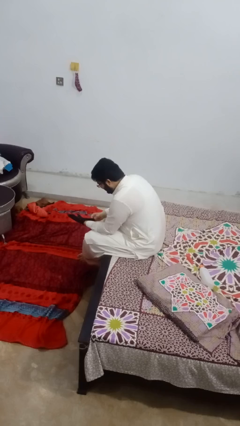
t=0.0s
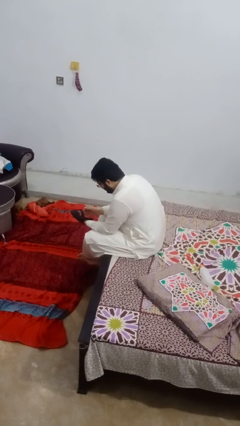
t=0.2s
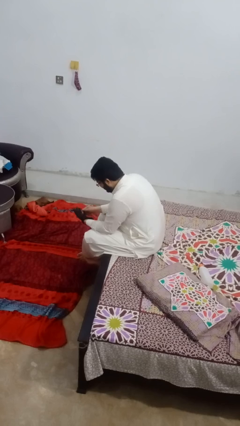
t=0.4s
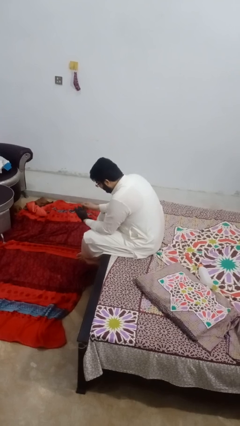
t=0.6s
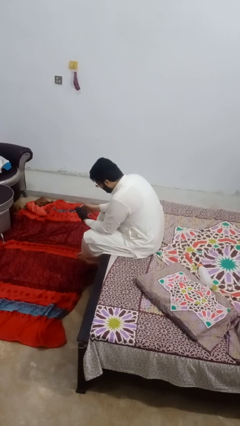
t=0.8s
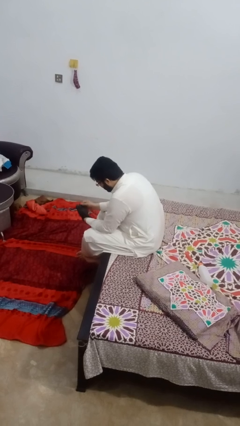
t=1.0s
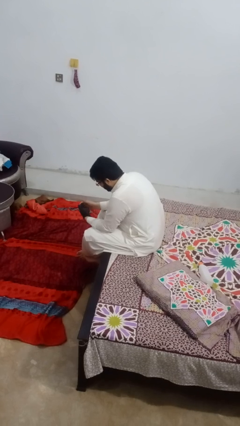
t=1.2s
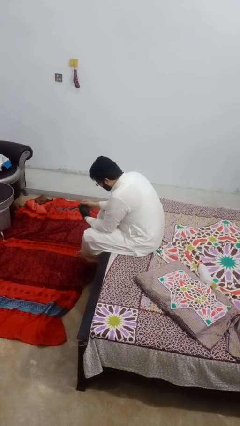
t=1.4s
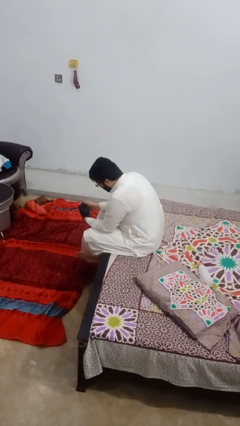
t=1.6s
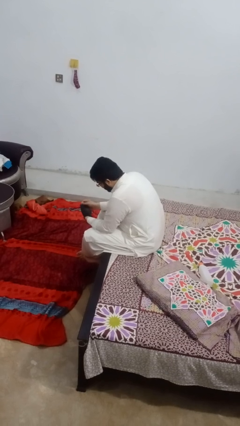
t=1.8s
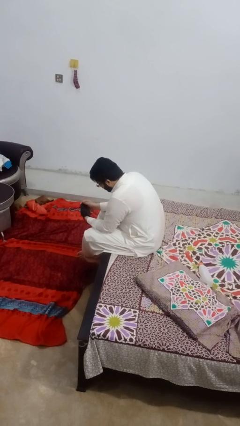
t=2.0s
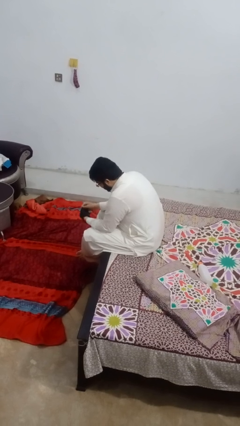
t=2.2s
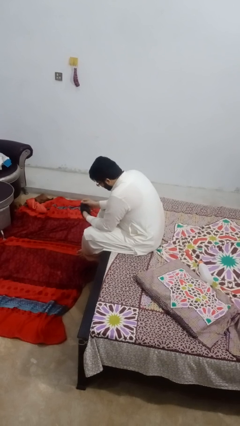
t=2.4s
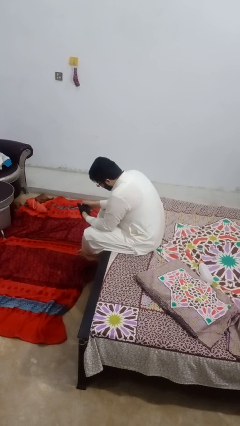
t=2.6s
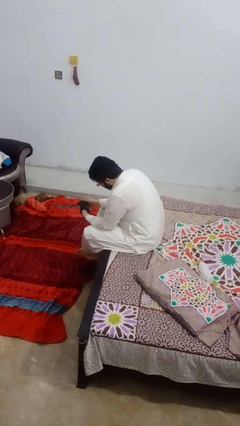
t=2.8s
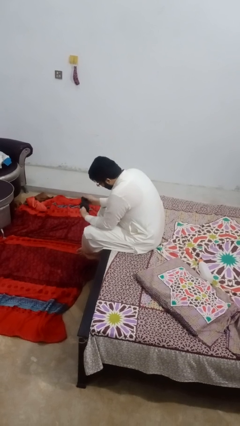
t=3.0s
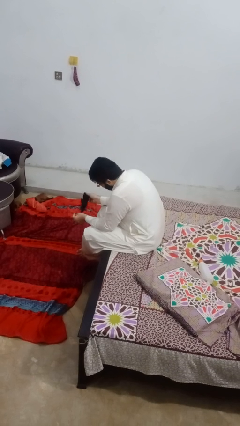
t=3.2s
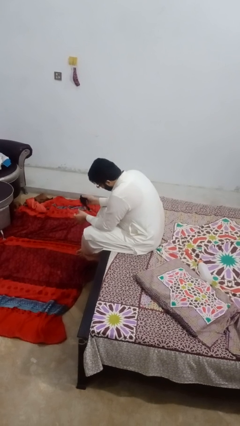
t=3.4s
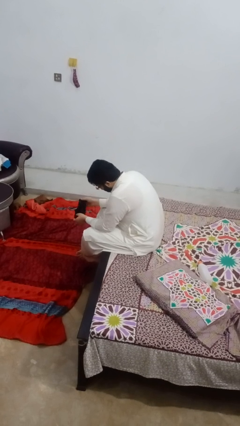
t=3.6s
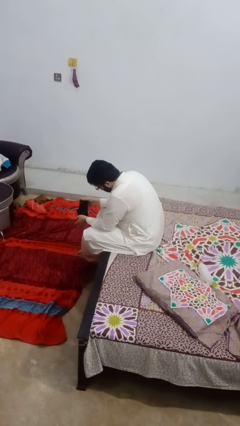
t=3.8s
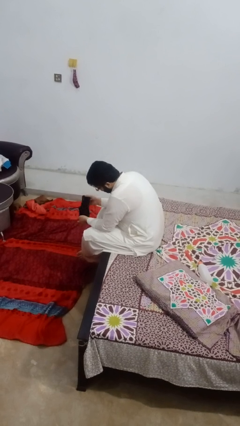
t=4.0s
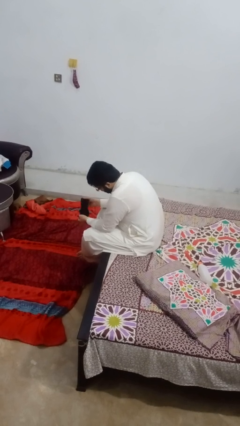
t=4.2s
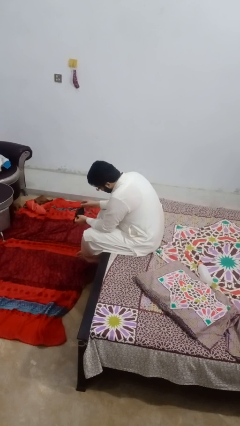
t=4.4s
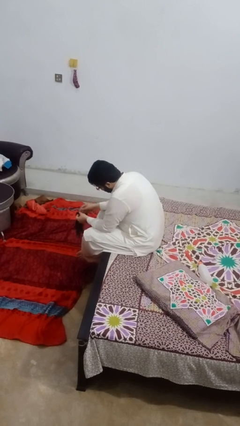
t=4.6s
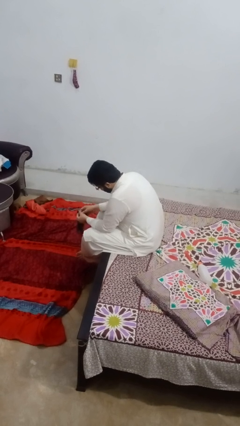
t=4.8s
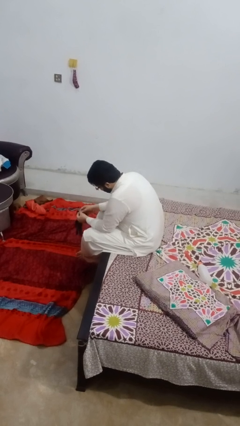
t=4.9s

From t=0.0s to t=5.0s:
person takes off gloves

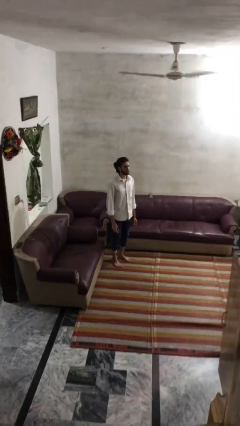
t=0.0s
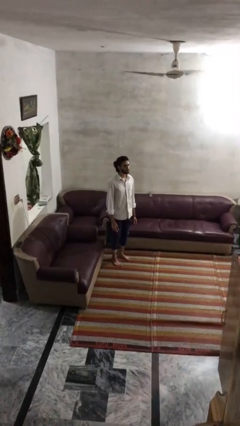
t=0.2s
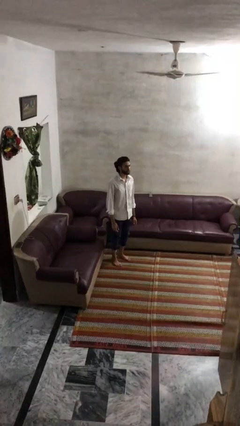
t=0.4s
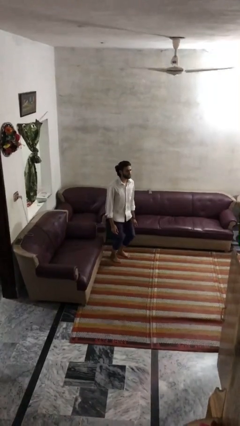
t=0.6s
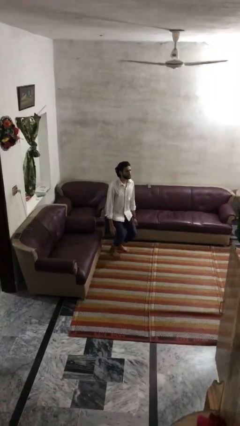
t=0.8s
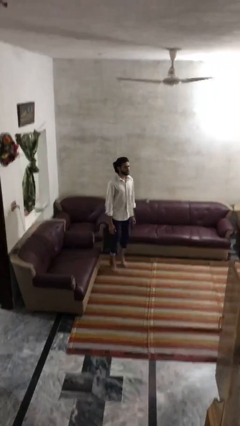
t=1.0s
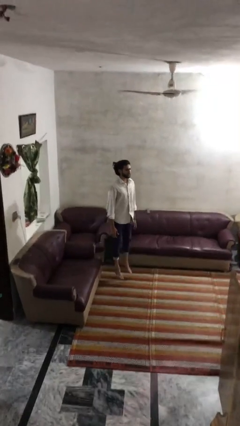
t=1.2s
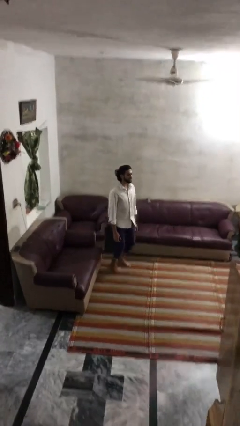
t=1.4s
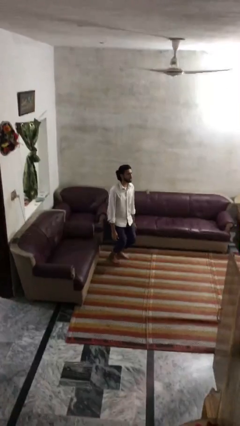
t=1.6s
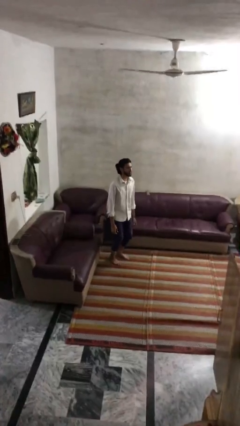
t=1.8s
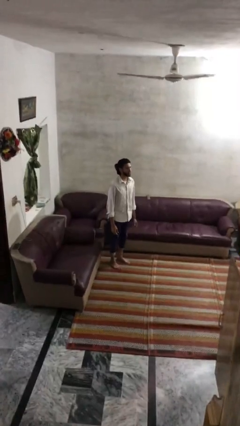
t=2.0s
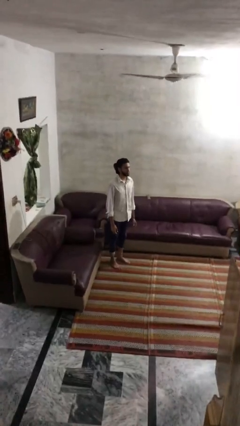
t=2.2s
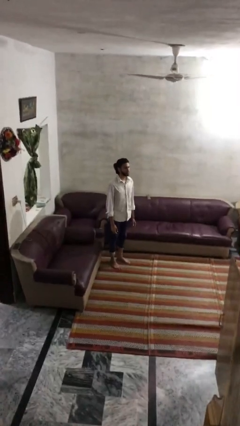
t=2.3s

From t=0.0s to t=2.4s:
person jumps

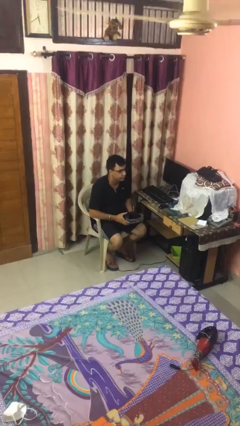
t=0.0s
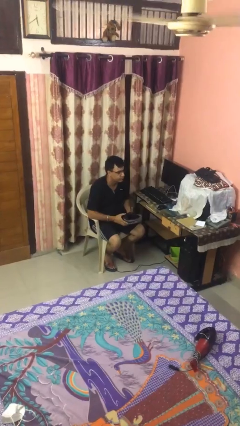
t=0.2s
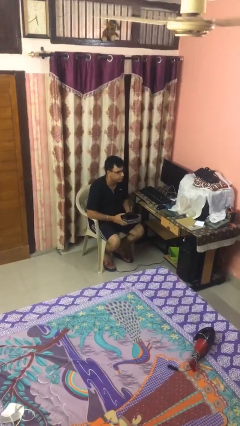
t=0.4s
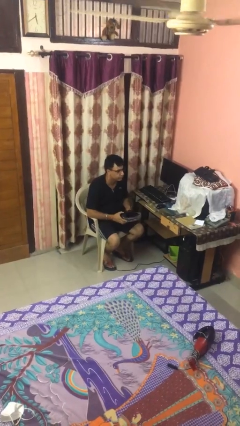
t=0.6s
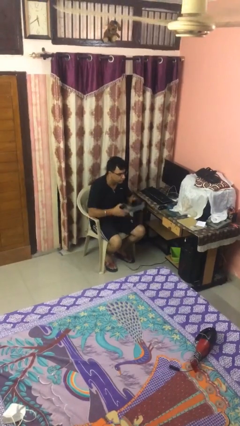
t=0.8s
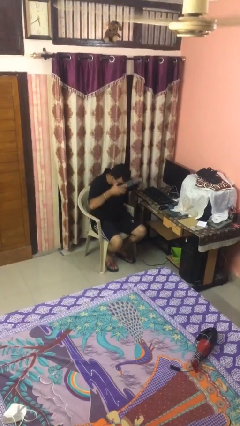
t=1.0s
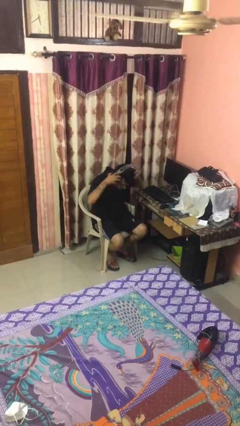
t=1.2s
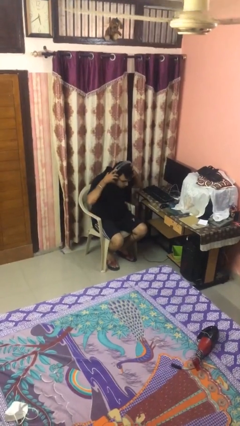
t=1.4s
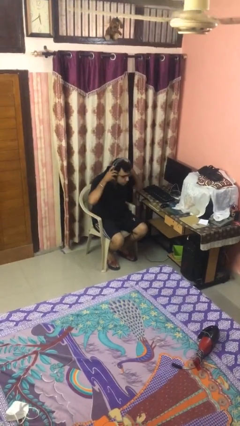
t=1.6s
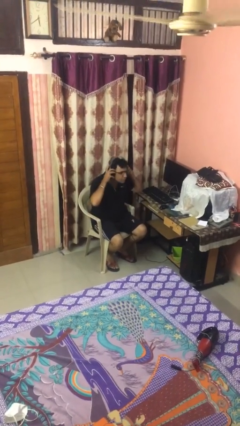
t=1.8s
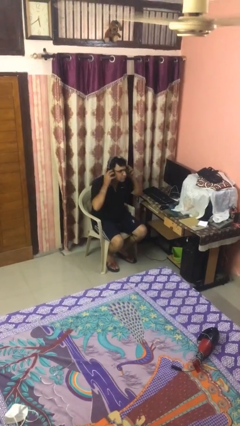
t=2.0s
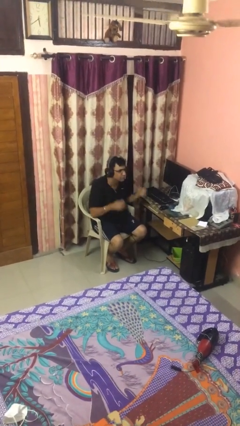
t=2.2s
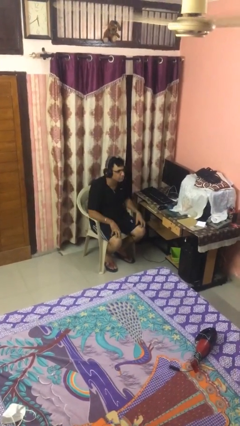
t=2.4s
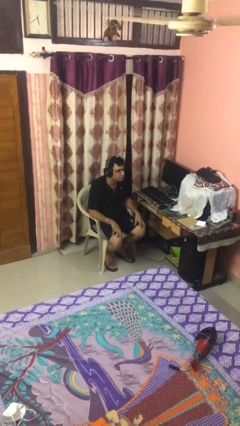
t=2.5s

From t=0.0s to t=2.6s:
person puts on headphones

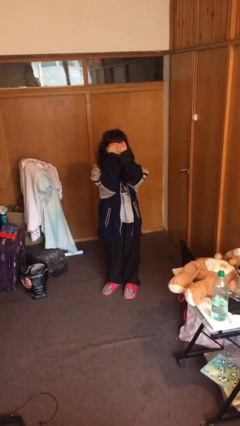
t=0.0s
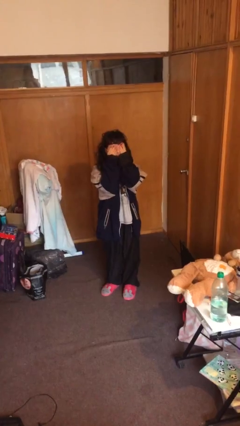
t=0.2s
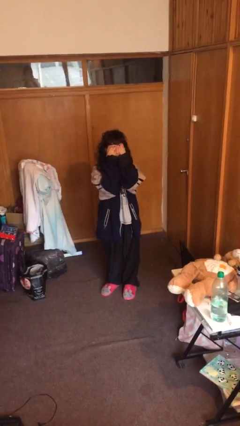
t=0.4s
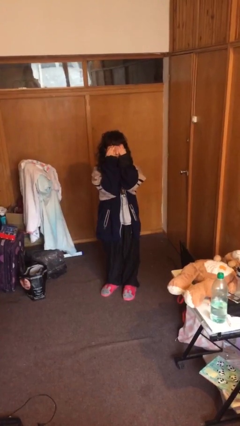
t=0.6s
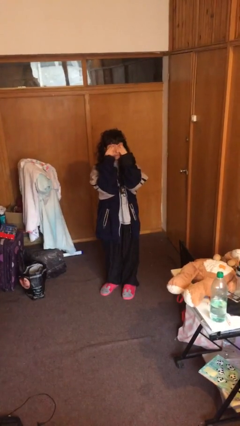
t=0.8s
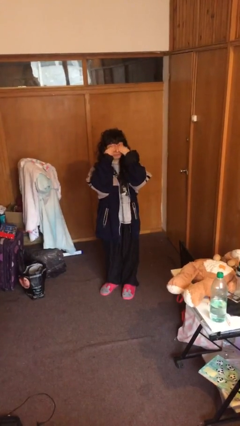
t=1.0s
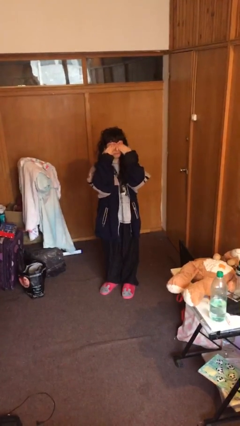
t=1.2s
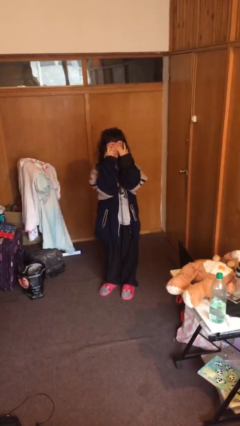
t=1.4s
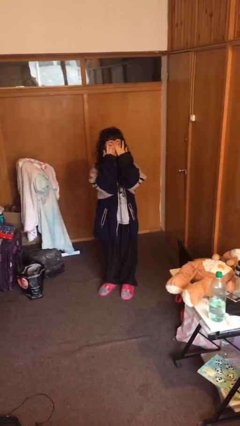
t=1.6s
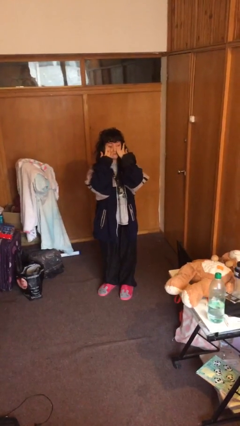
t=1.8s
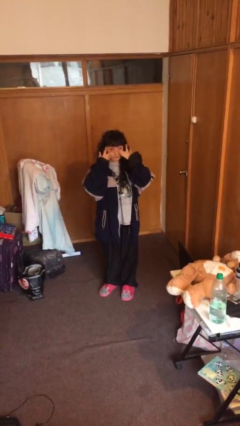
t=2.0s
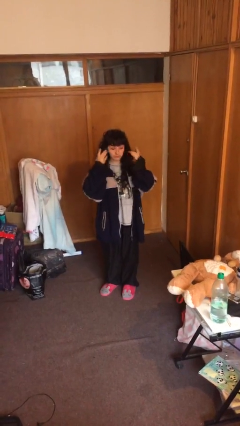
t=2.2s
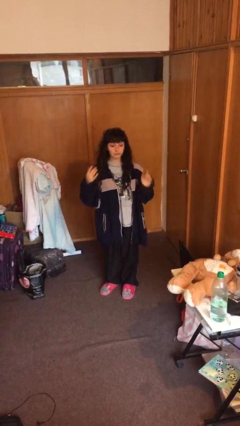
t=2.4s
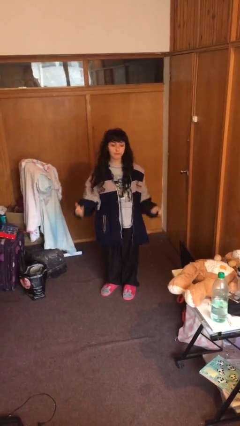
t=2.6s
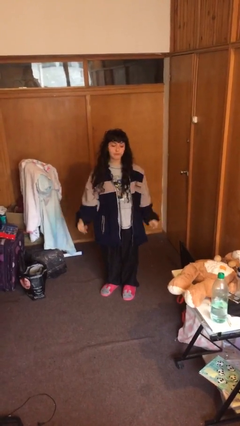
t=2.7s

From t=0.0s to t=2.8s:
person rubs eyes

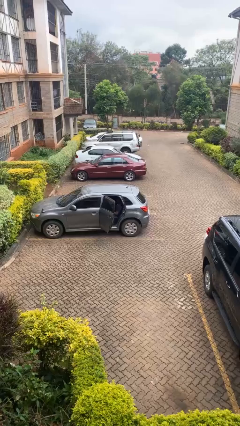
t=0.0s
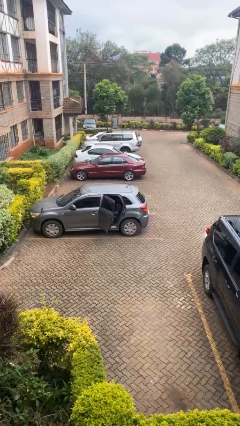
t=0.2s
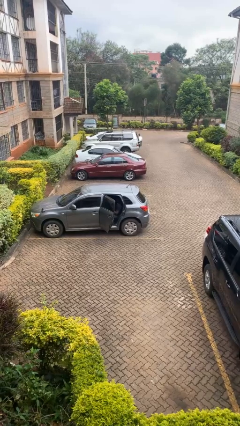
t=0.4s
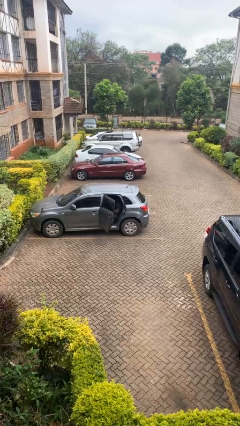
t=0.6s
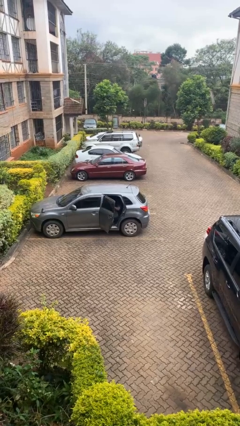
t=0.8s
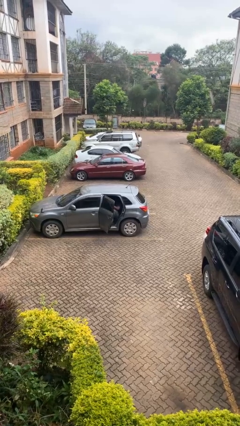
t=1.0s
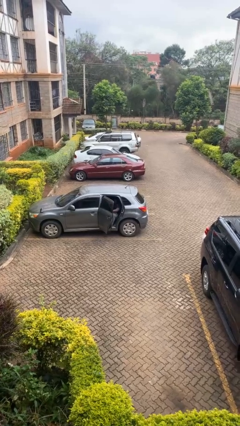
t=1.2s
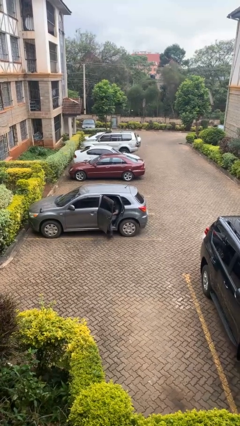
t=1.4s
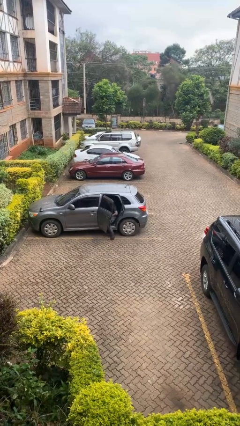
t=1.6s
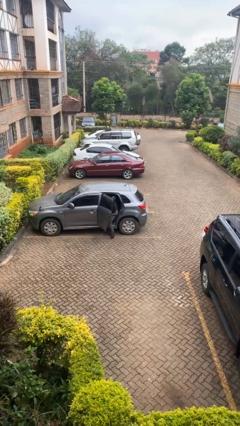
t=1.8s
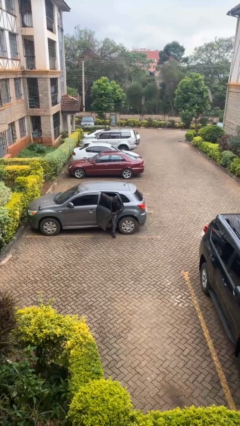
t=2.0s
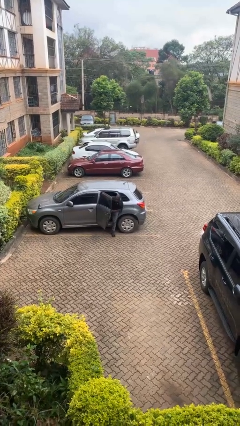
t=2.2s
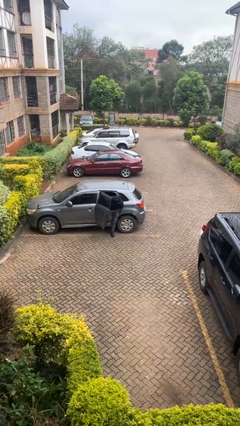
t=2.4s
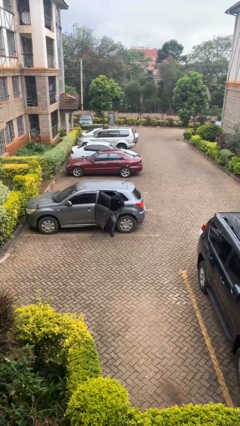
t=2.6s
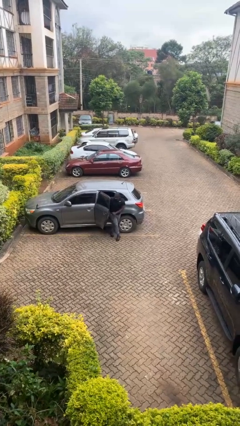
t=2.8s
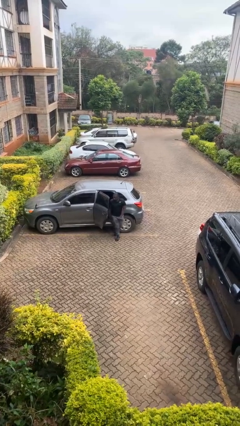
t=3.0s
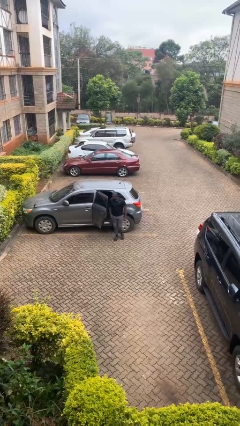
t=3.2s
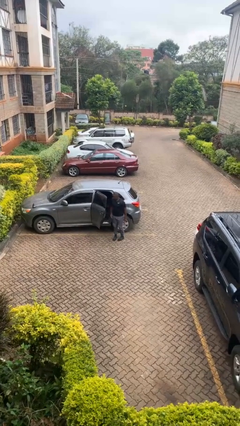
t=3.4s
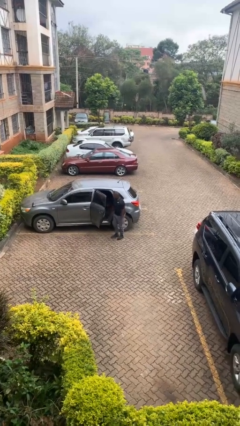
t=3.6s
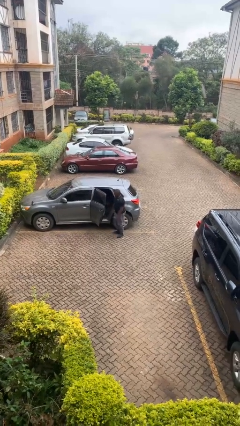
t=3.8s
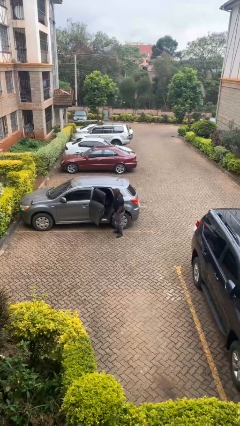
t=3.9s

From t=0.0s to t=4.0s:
person exits car

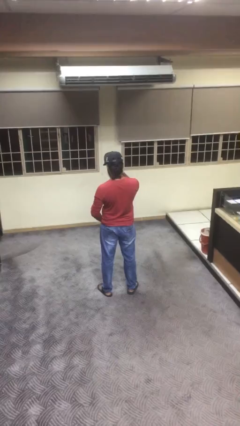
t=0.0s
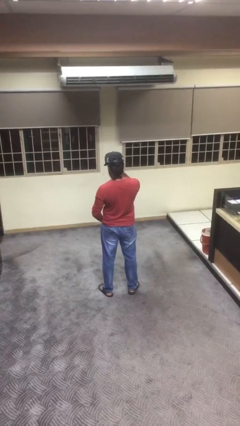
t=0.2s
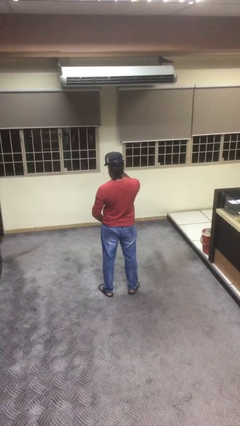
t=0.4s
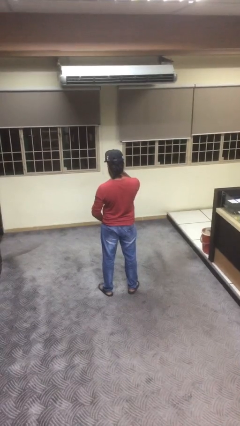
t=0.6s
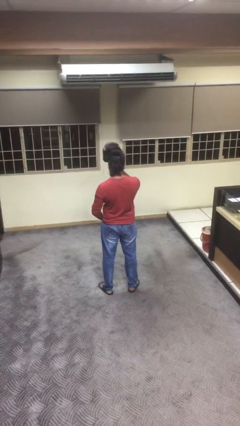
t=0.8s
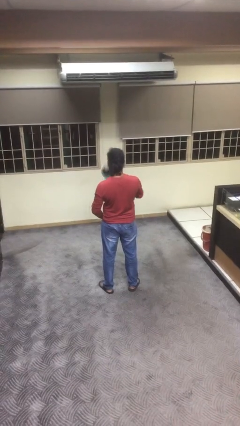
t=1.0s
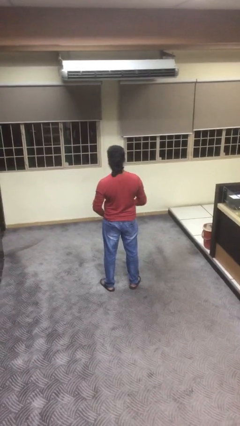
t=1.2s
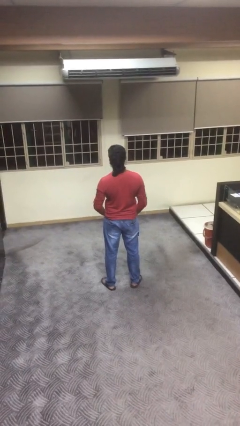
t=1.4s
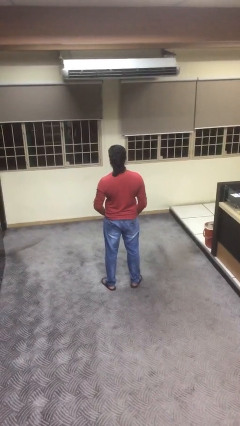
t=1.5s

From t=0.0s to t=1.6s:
person takes off hat
